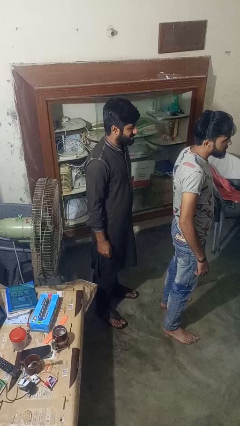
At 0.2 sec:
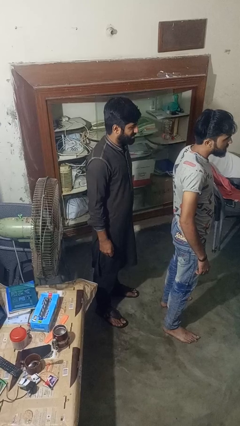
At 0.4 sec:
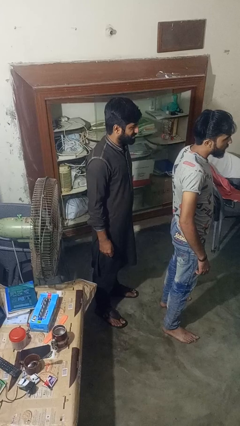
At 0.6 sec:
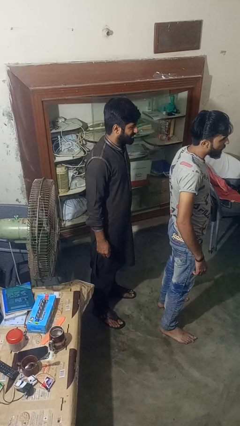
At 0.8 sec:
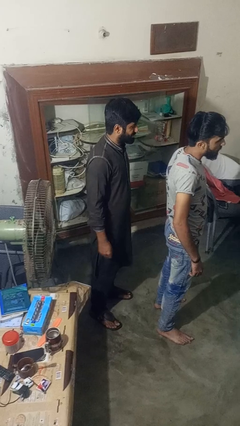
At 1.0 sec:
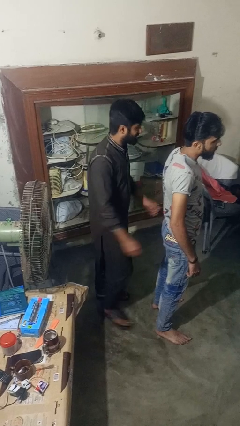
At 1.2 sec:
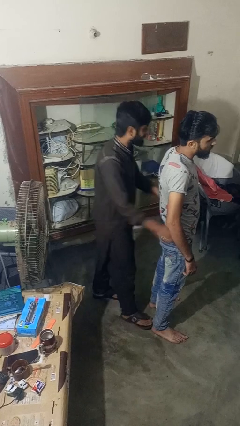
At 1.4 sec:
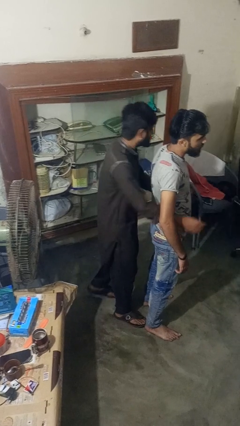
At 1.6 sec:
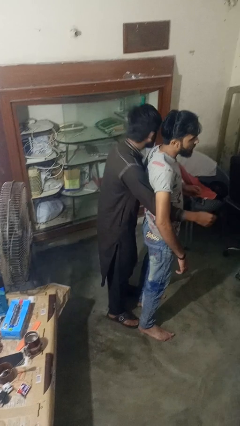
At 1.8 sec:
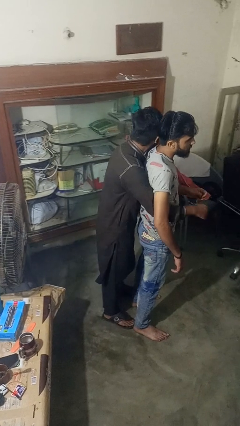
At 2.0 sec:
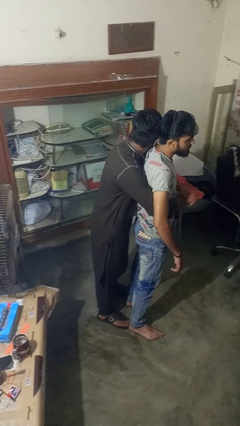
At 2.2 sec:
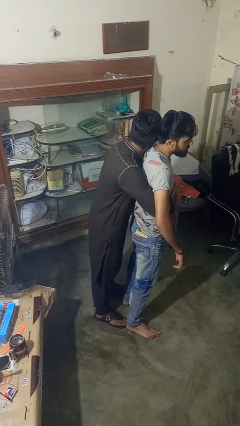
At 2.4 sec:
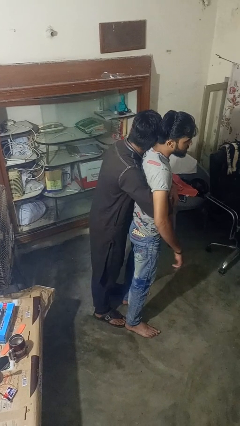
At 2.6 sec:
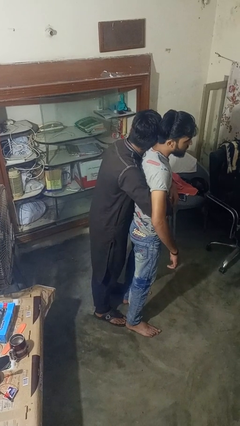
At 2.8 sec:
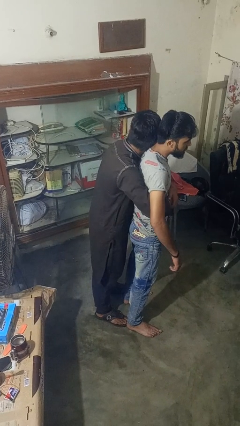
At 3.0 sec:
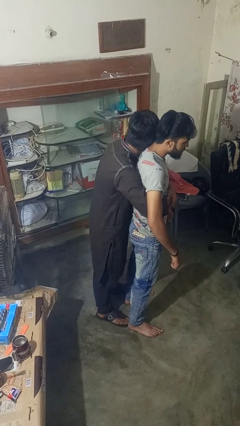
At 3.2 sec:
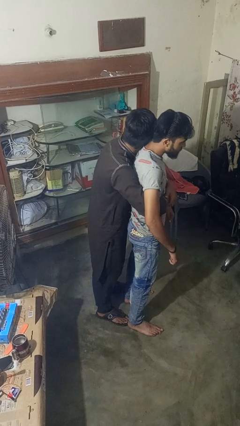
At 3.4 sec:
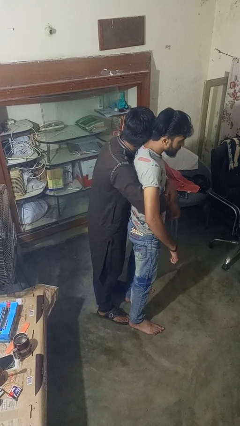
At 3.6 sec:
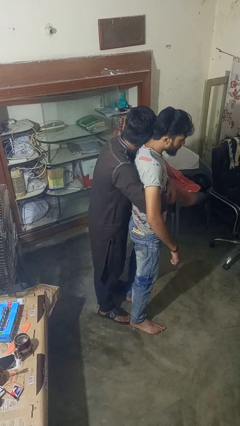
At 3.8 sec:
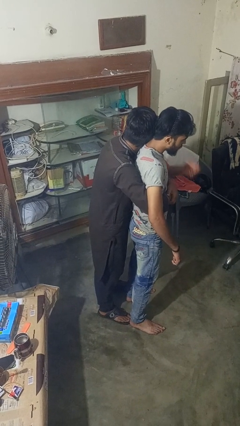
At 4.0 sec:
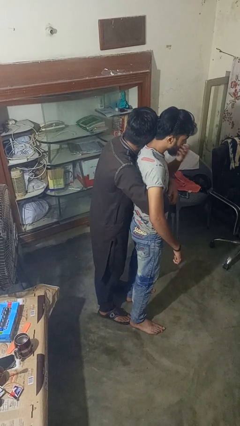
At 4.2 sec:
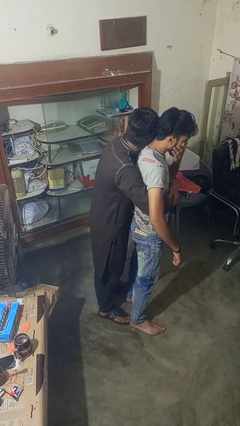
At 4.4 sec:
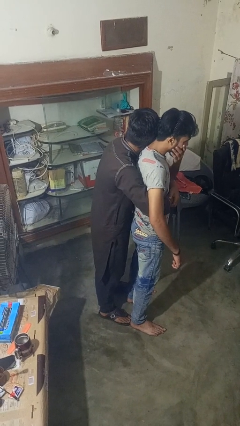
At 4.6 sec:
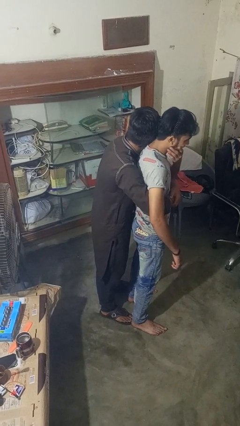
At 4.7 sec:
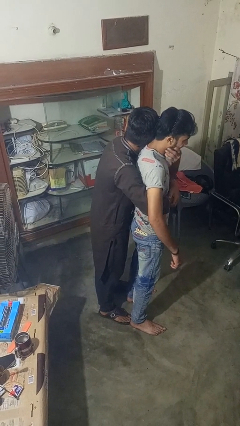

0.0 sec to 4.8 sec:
person hugs person from behind

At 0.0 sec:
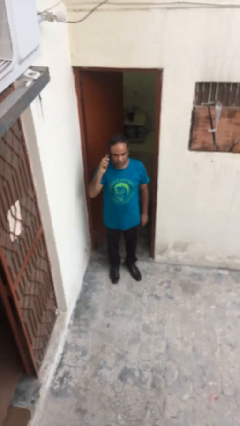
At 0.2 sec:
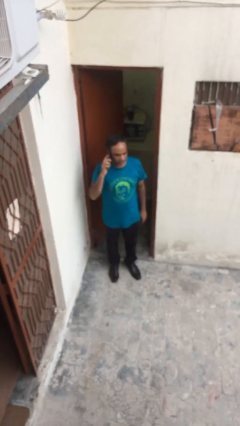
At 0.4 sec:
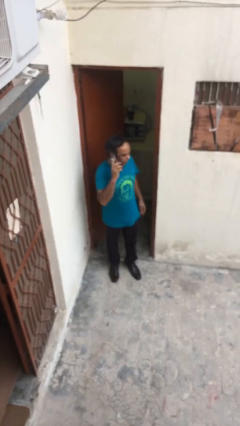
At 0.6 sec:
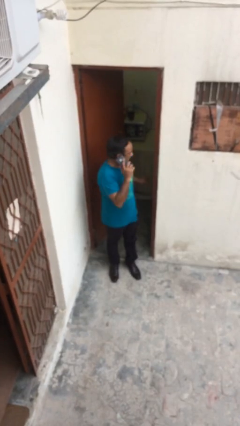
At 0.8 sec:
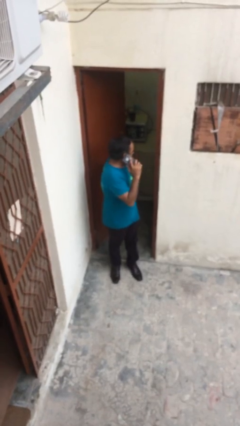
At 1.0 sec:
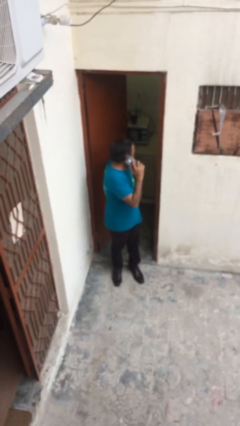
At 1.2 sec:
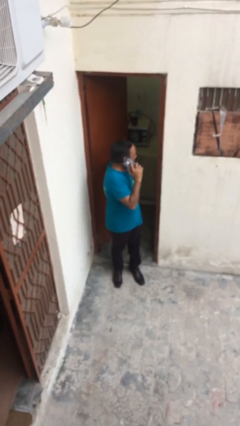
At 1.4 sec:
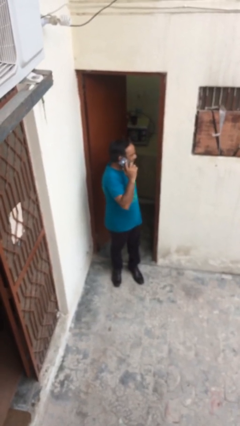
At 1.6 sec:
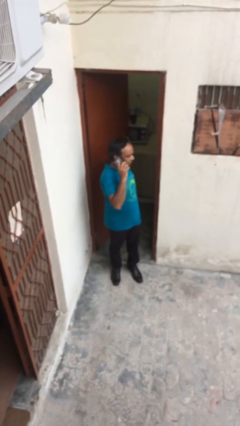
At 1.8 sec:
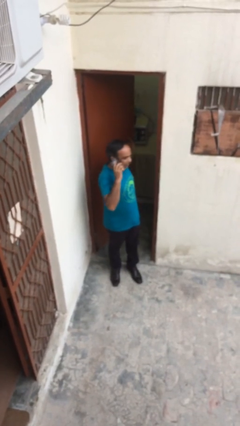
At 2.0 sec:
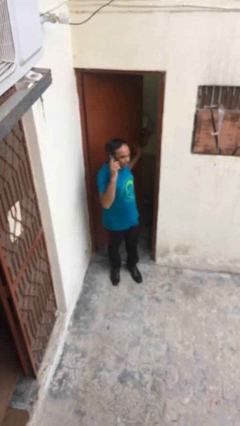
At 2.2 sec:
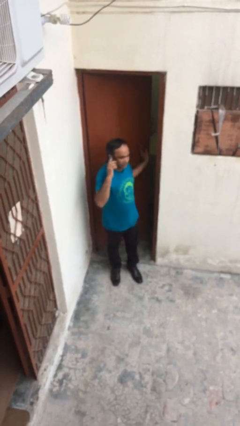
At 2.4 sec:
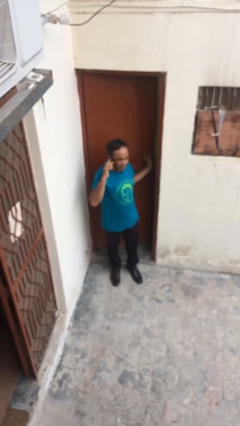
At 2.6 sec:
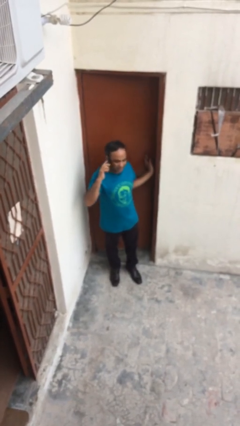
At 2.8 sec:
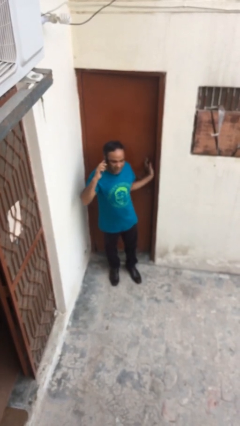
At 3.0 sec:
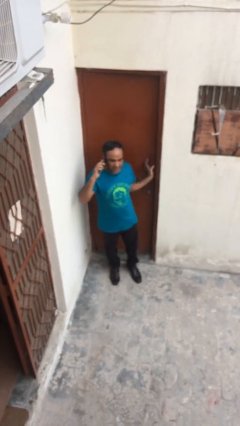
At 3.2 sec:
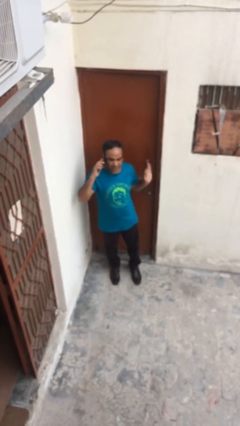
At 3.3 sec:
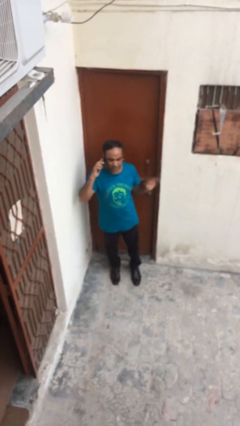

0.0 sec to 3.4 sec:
person closes facility door

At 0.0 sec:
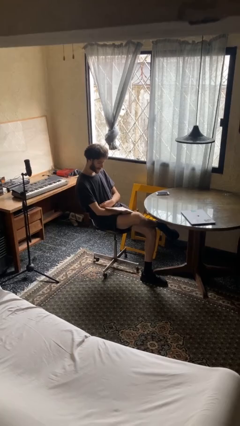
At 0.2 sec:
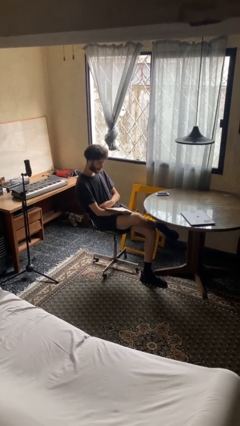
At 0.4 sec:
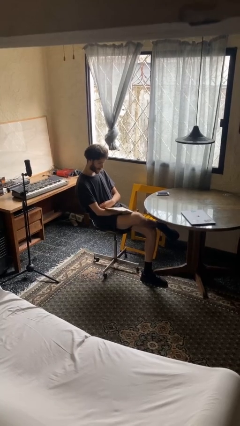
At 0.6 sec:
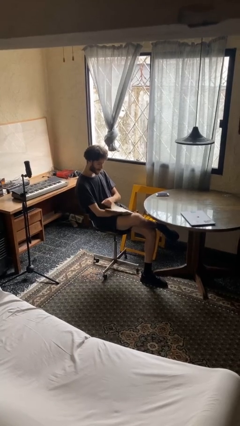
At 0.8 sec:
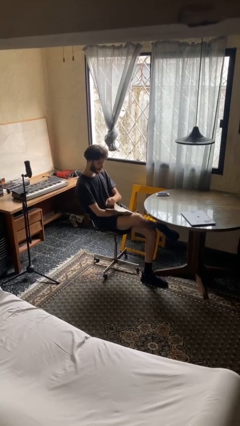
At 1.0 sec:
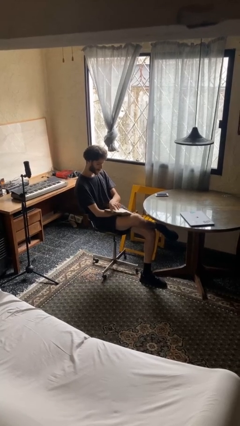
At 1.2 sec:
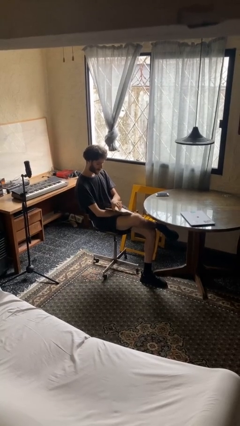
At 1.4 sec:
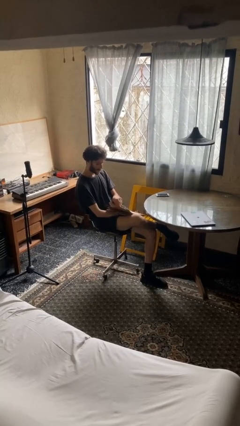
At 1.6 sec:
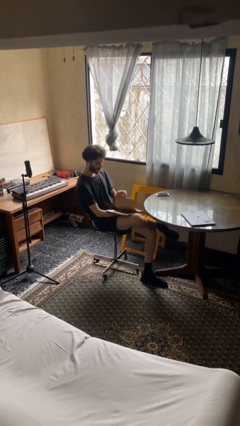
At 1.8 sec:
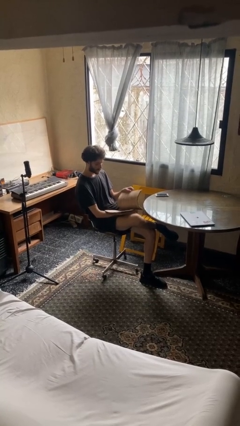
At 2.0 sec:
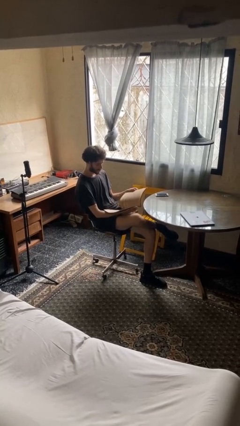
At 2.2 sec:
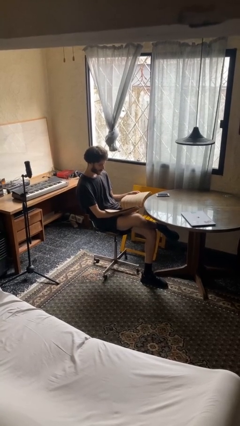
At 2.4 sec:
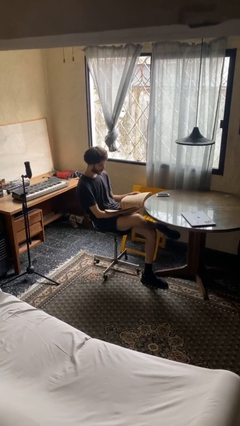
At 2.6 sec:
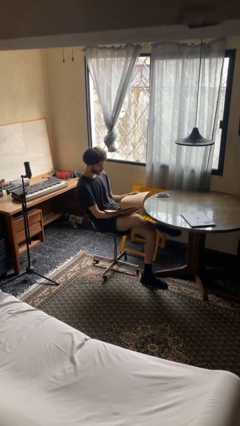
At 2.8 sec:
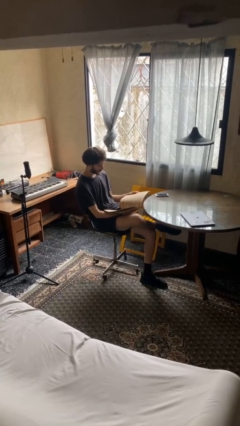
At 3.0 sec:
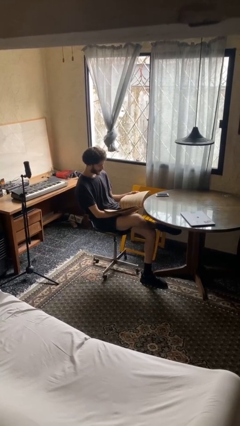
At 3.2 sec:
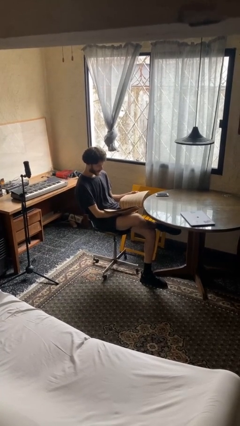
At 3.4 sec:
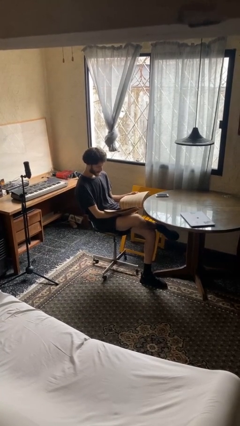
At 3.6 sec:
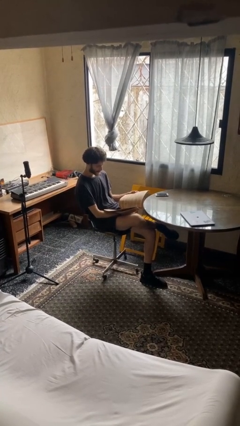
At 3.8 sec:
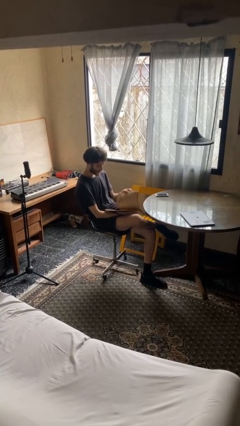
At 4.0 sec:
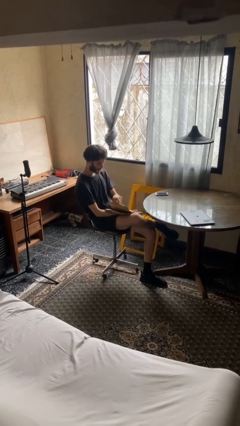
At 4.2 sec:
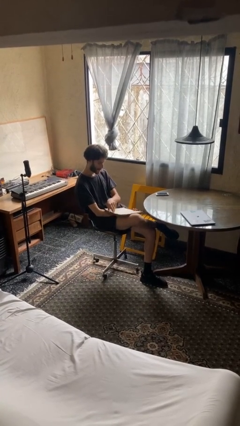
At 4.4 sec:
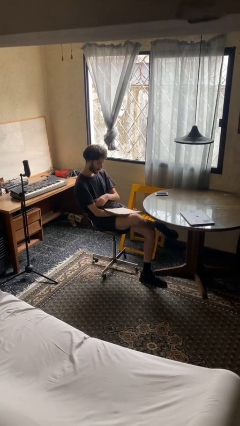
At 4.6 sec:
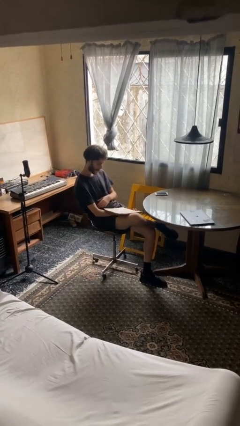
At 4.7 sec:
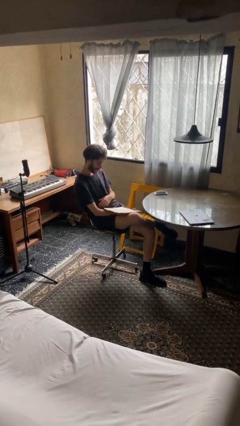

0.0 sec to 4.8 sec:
person reads document

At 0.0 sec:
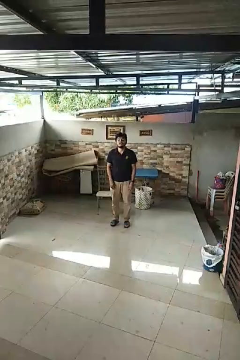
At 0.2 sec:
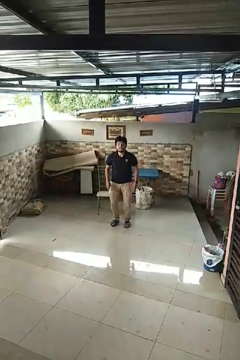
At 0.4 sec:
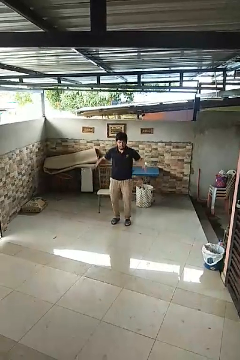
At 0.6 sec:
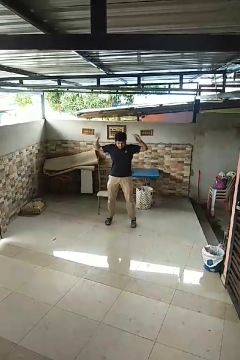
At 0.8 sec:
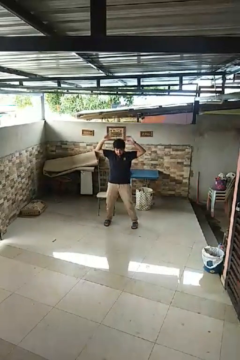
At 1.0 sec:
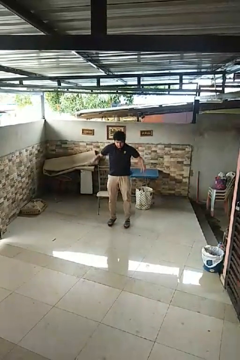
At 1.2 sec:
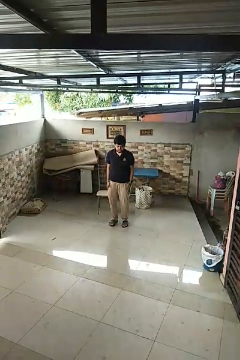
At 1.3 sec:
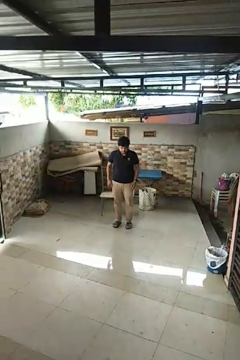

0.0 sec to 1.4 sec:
person exercises with jumping jacks

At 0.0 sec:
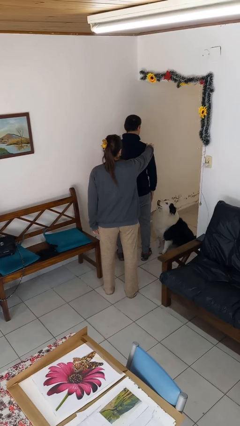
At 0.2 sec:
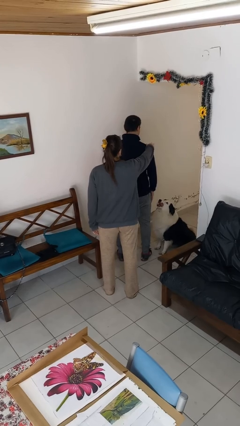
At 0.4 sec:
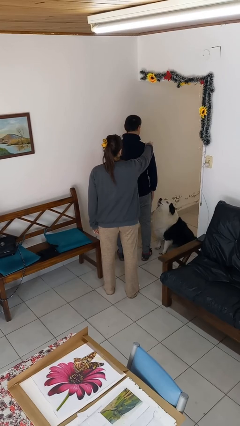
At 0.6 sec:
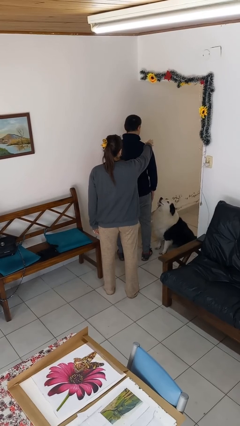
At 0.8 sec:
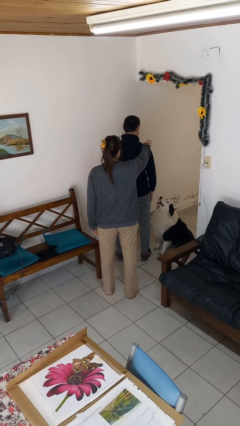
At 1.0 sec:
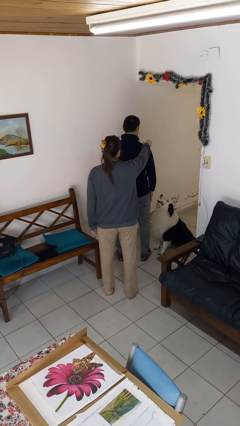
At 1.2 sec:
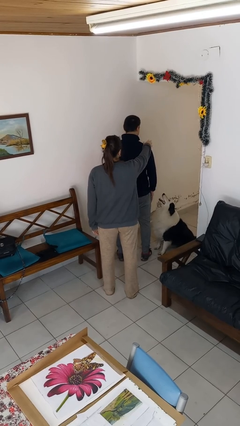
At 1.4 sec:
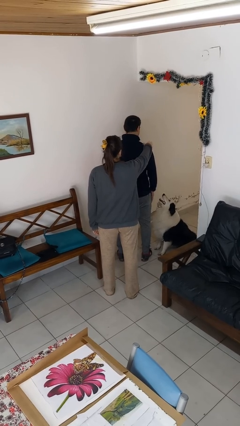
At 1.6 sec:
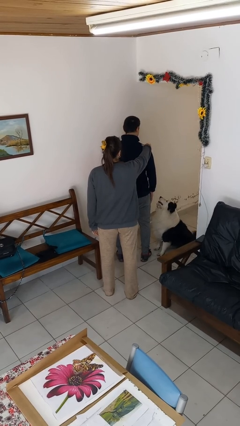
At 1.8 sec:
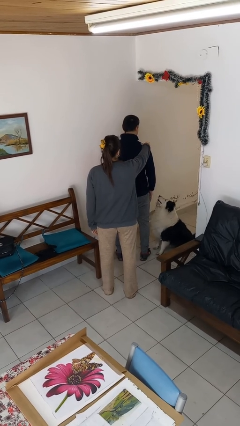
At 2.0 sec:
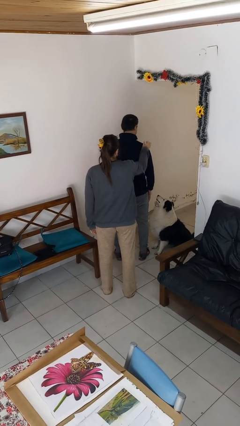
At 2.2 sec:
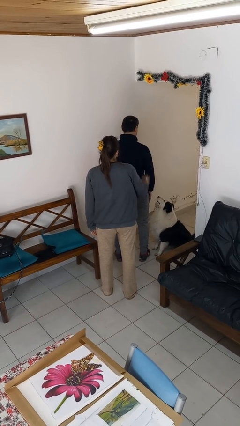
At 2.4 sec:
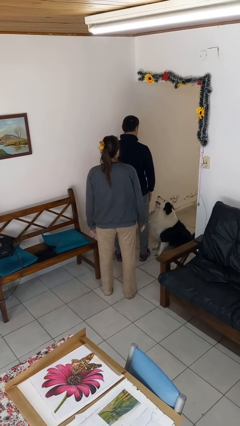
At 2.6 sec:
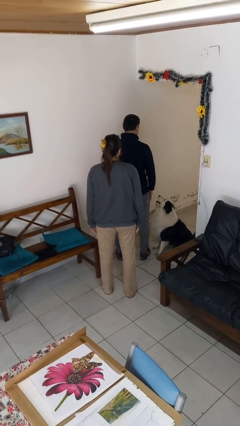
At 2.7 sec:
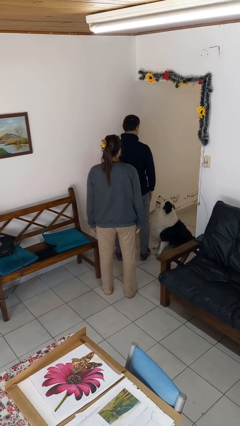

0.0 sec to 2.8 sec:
person touches back of person

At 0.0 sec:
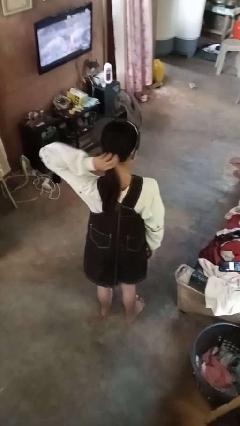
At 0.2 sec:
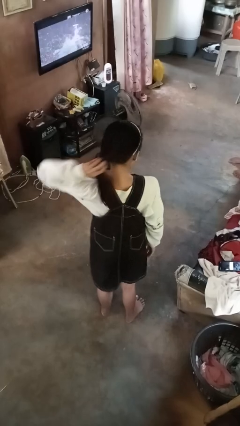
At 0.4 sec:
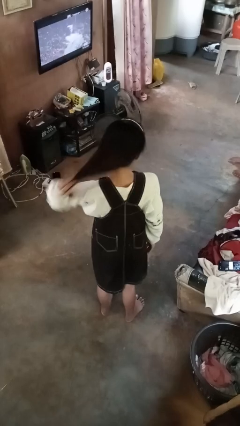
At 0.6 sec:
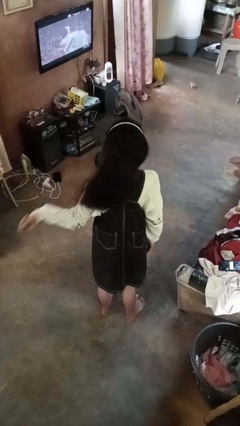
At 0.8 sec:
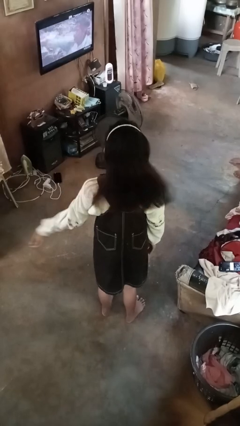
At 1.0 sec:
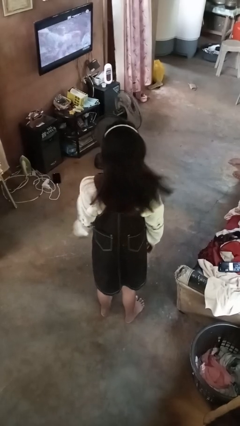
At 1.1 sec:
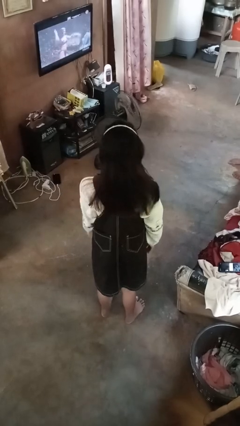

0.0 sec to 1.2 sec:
person takes off hairtie
